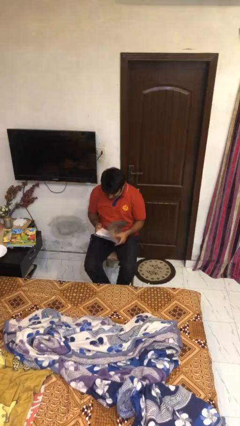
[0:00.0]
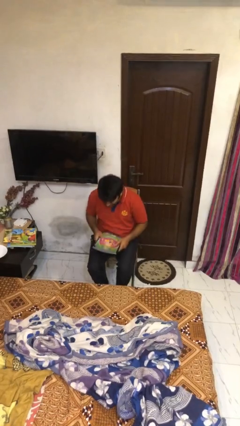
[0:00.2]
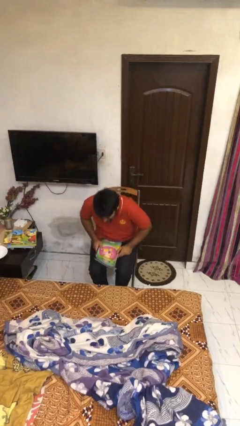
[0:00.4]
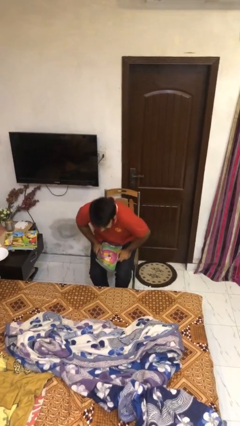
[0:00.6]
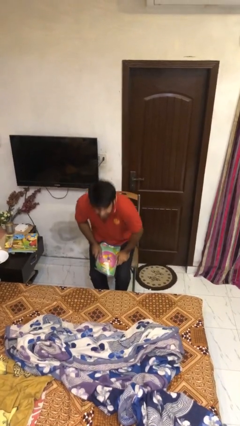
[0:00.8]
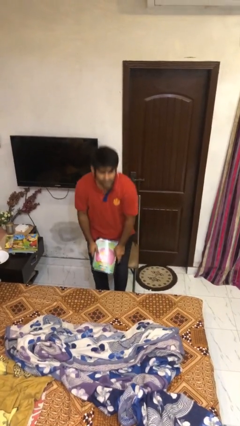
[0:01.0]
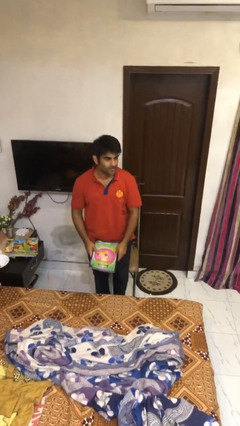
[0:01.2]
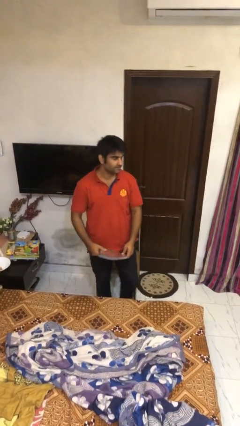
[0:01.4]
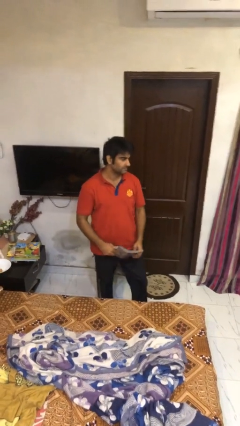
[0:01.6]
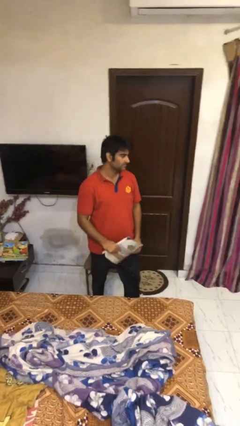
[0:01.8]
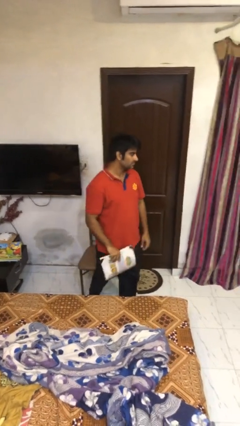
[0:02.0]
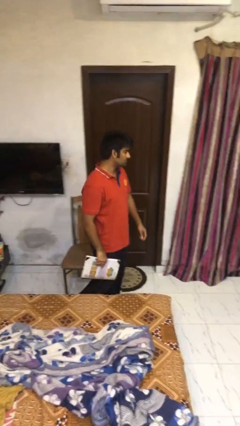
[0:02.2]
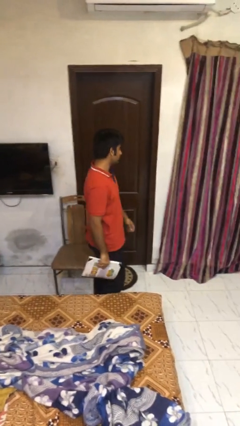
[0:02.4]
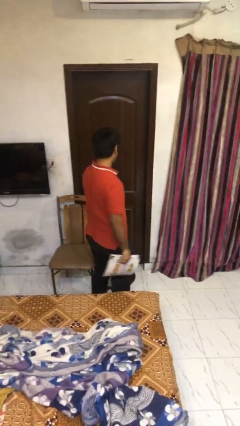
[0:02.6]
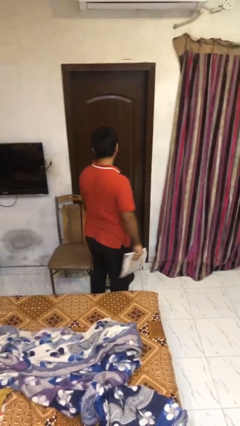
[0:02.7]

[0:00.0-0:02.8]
person stands up

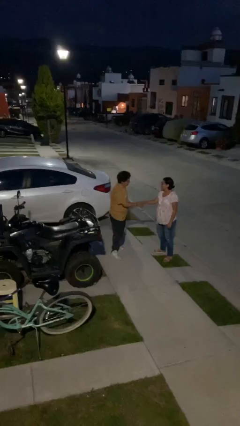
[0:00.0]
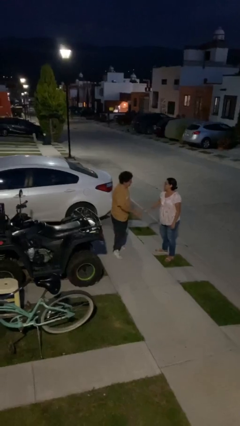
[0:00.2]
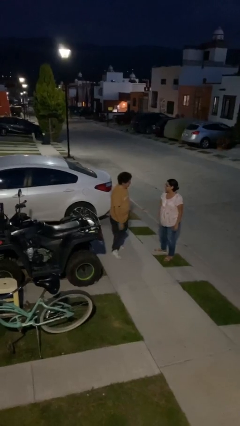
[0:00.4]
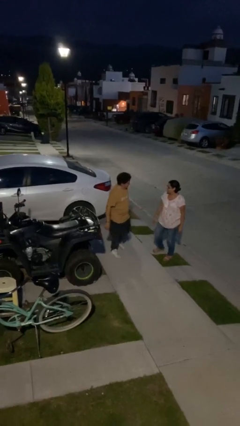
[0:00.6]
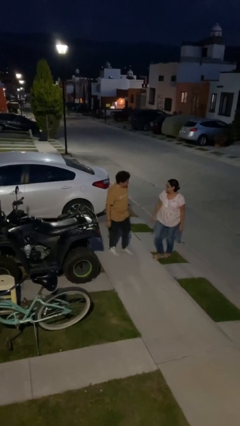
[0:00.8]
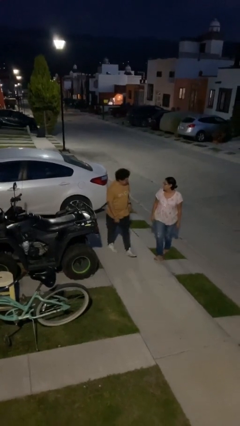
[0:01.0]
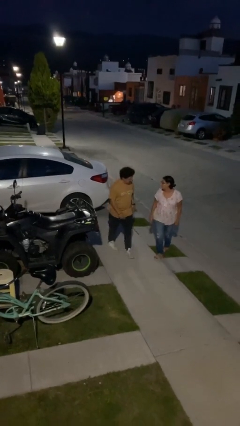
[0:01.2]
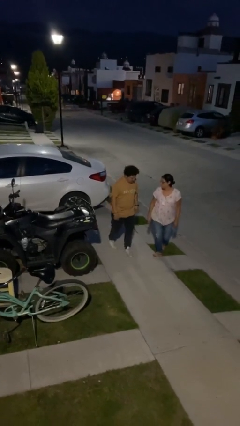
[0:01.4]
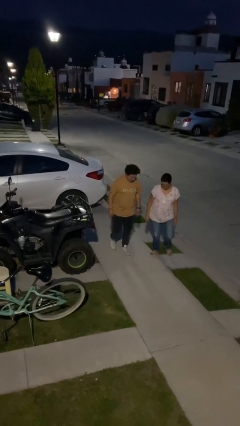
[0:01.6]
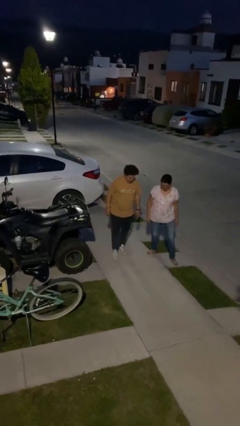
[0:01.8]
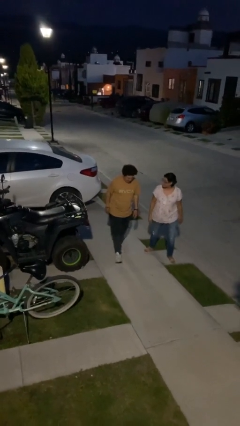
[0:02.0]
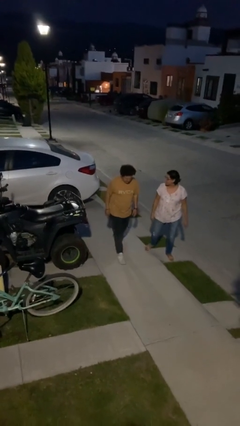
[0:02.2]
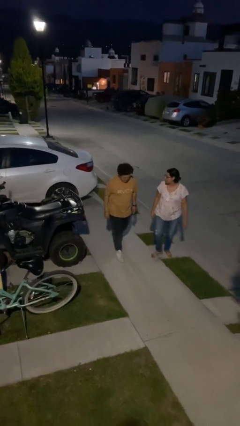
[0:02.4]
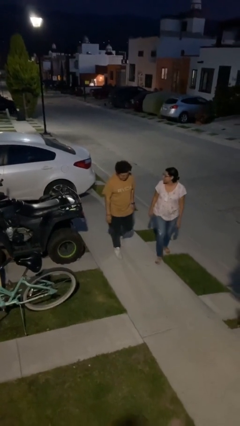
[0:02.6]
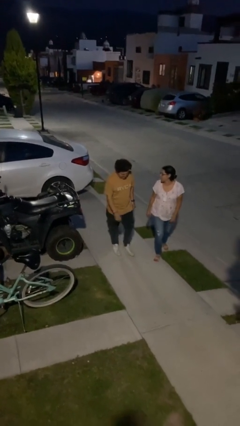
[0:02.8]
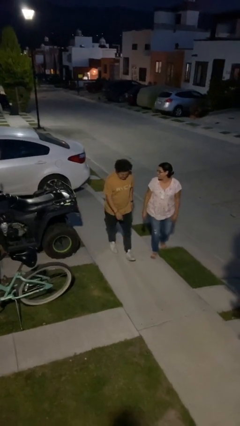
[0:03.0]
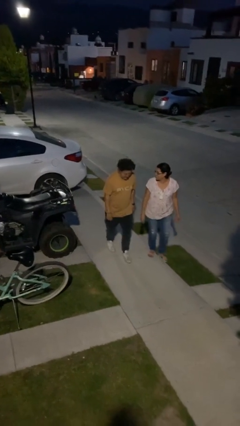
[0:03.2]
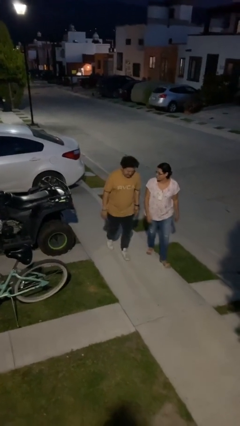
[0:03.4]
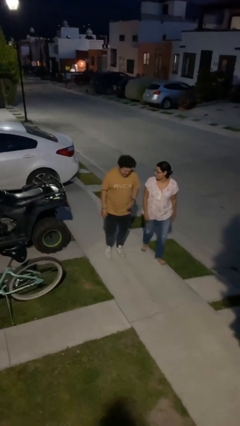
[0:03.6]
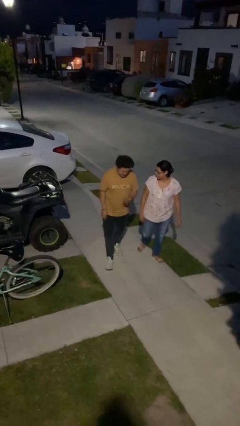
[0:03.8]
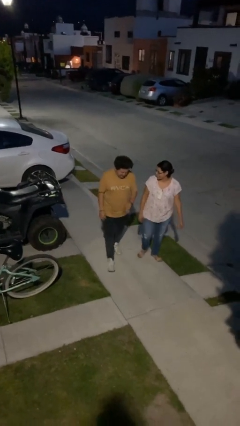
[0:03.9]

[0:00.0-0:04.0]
person talks to person

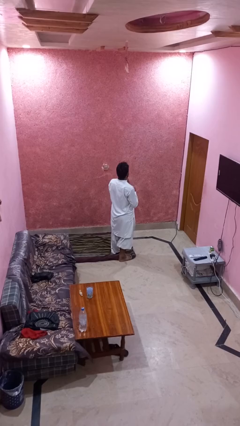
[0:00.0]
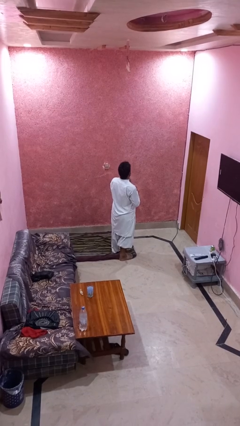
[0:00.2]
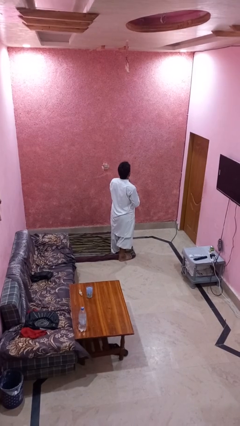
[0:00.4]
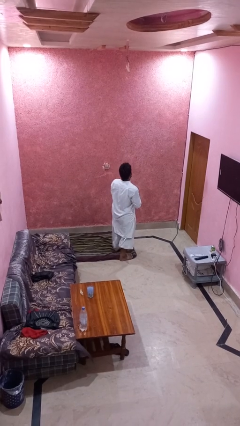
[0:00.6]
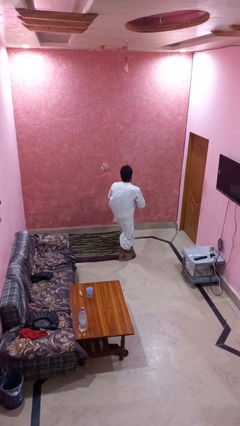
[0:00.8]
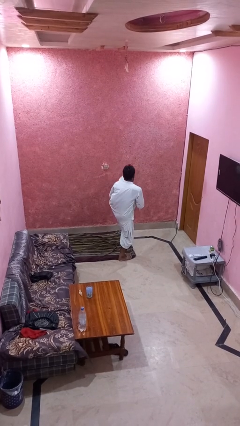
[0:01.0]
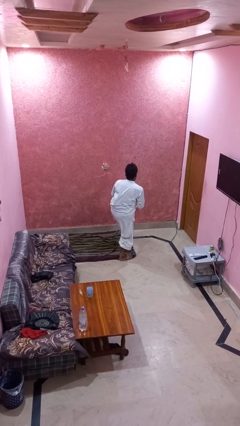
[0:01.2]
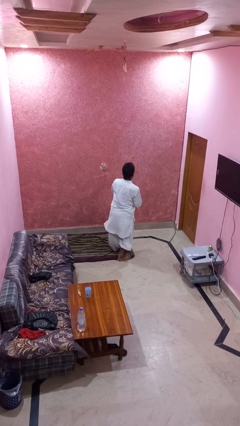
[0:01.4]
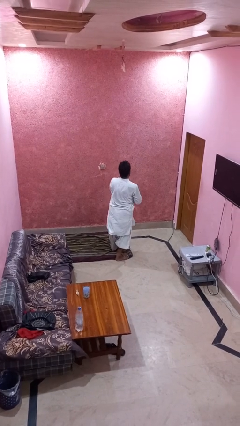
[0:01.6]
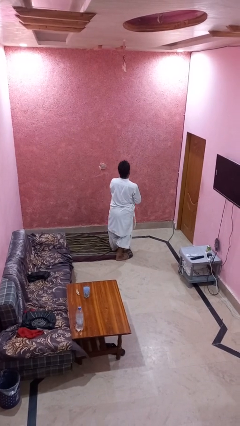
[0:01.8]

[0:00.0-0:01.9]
person karate kicks

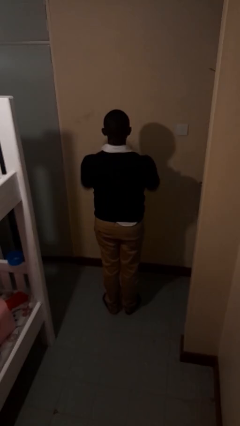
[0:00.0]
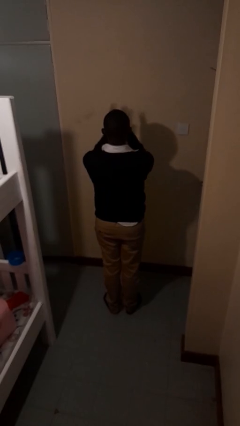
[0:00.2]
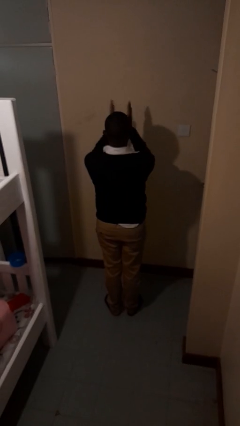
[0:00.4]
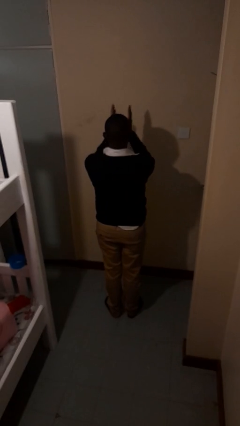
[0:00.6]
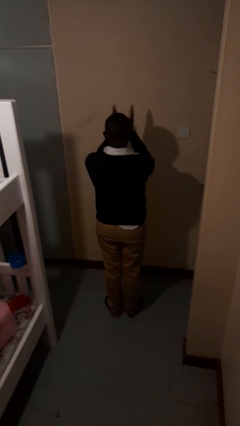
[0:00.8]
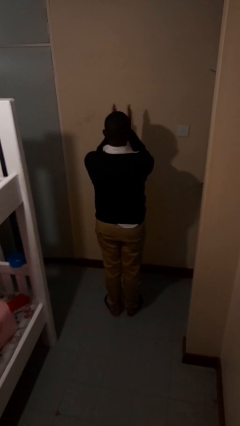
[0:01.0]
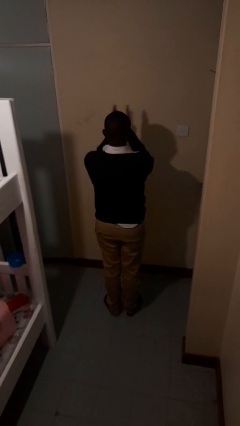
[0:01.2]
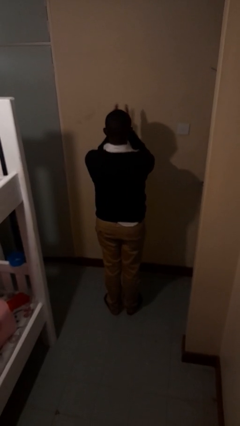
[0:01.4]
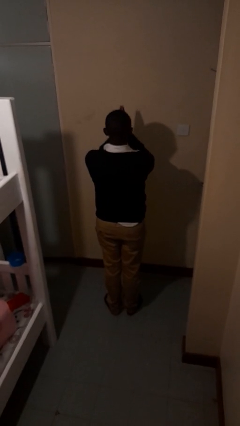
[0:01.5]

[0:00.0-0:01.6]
person claps hands

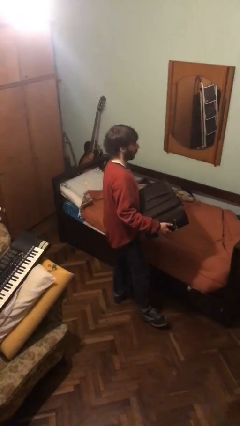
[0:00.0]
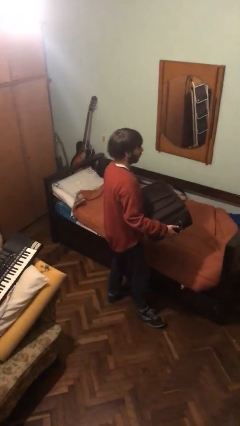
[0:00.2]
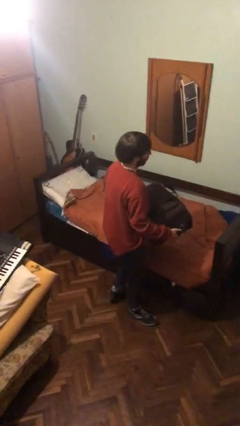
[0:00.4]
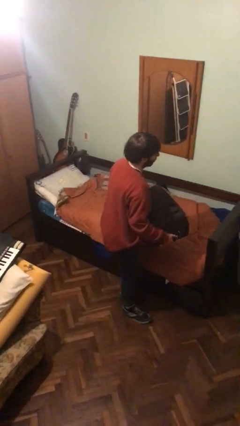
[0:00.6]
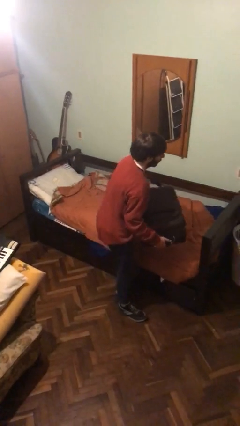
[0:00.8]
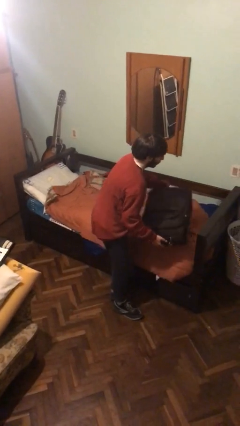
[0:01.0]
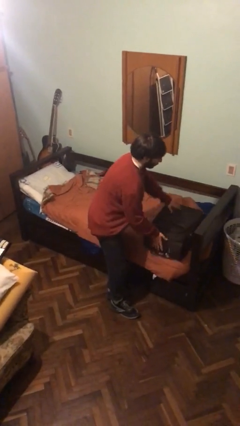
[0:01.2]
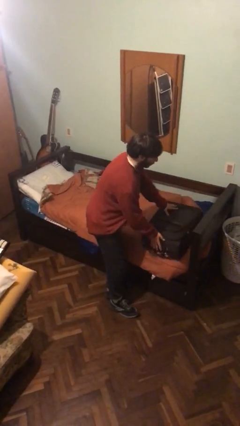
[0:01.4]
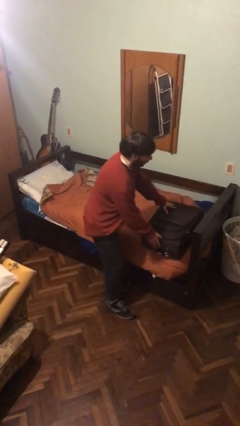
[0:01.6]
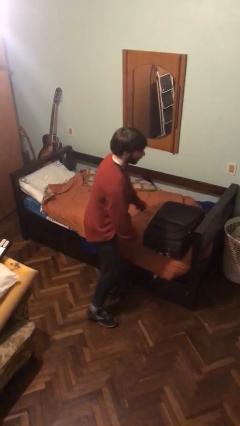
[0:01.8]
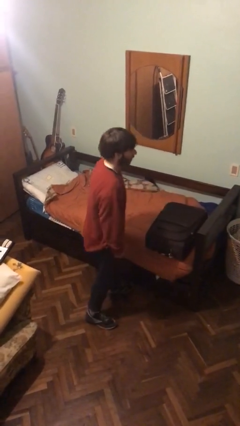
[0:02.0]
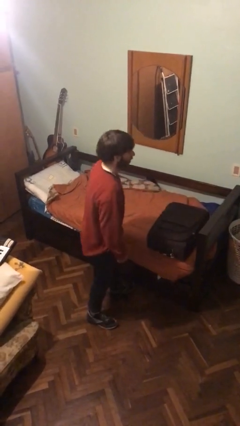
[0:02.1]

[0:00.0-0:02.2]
person puts down object on bed

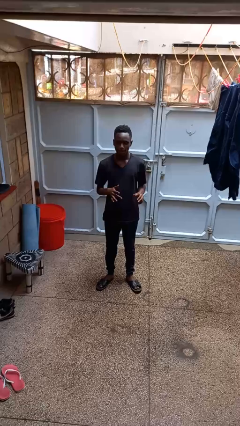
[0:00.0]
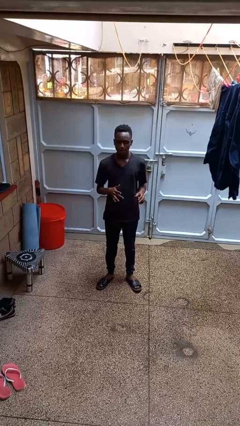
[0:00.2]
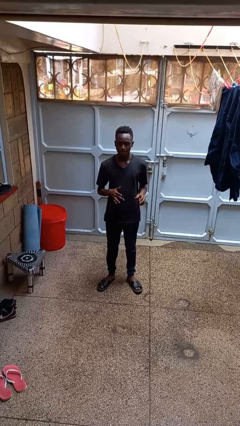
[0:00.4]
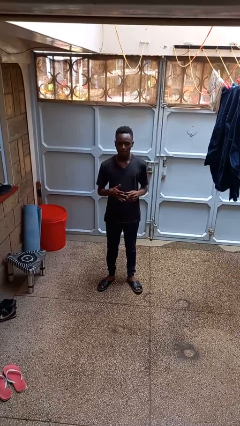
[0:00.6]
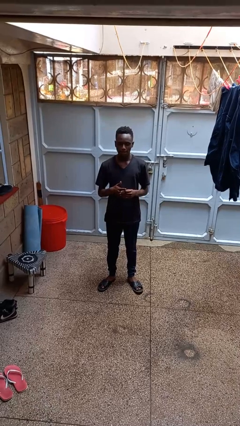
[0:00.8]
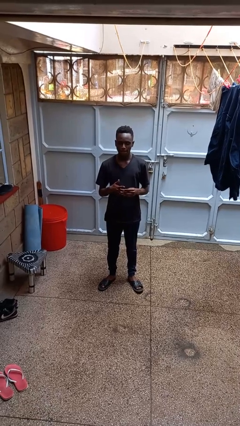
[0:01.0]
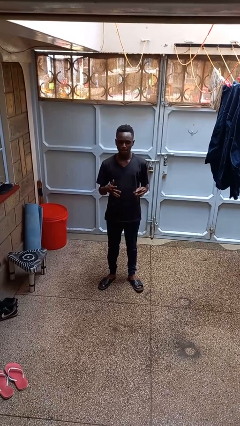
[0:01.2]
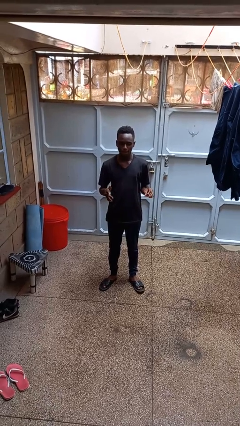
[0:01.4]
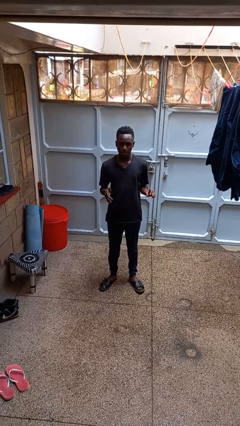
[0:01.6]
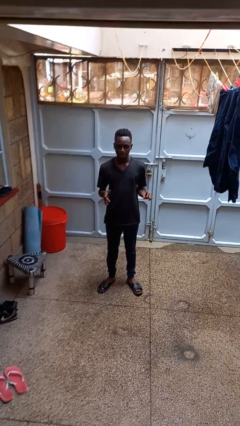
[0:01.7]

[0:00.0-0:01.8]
person takes off ring

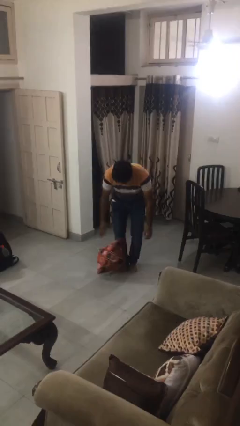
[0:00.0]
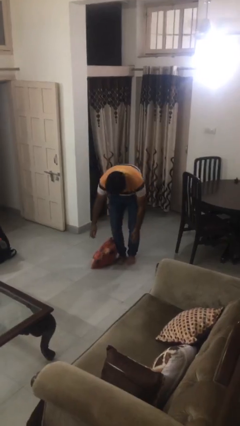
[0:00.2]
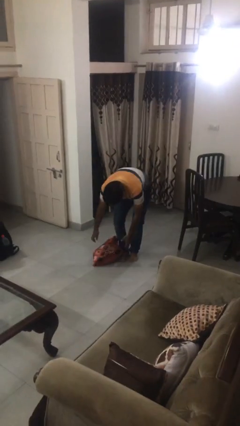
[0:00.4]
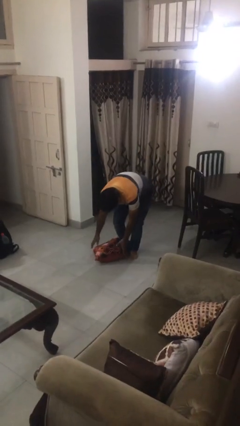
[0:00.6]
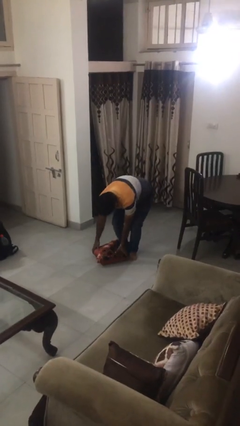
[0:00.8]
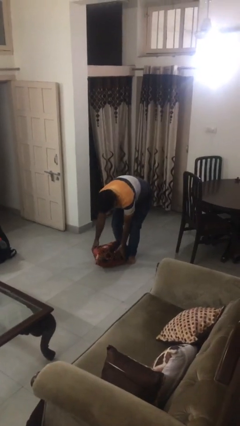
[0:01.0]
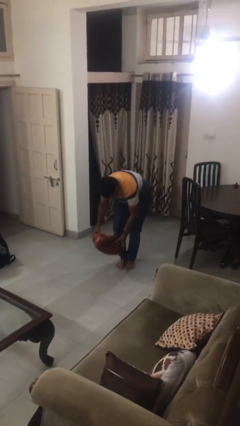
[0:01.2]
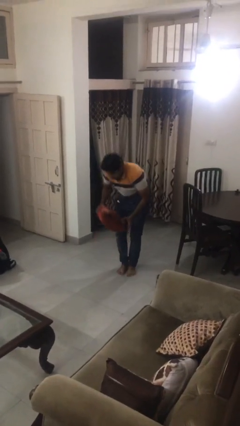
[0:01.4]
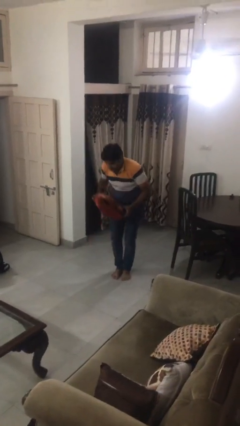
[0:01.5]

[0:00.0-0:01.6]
person picks up object from floor

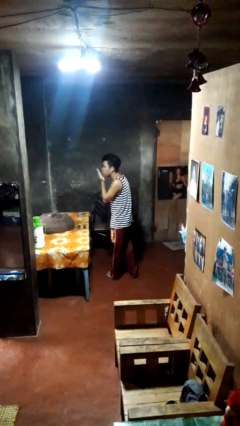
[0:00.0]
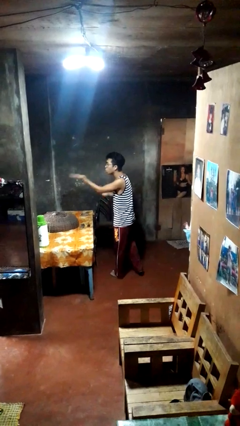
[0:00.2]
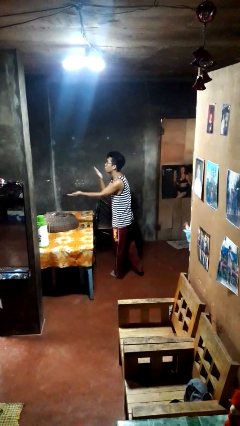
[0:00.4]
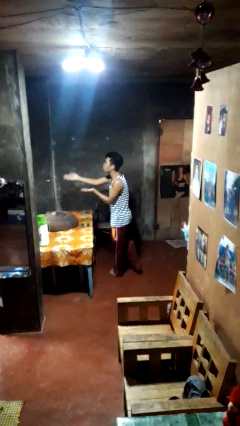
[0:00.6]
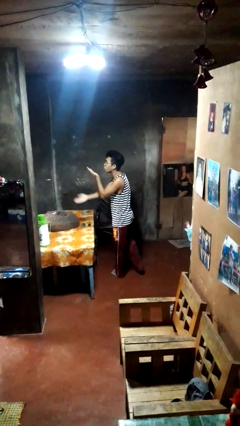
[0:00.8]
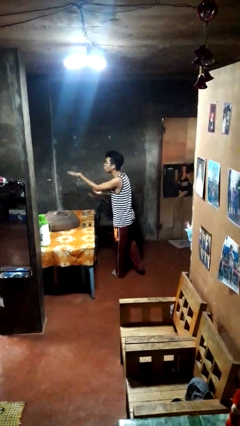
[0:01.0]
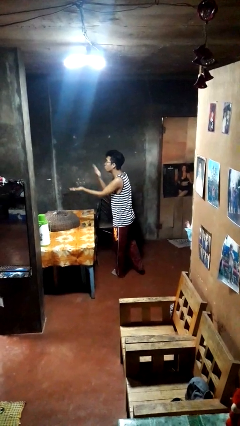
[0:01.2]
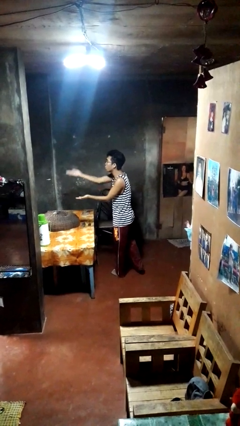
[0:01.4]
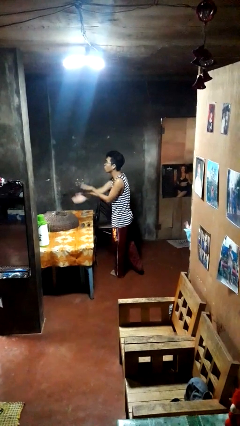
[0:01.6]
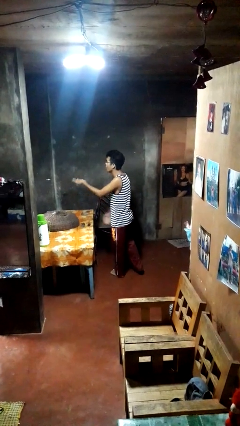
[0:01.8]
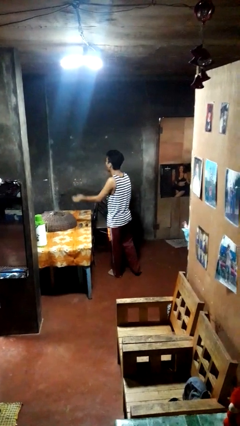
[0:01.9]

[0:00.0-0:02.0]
person gestures blow kiss
